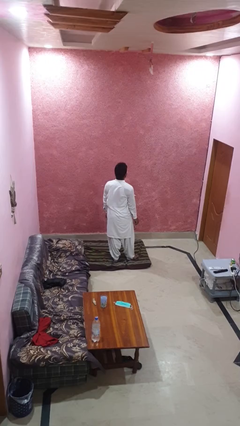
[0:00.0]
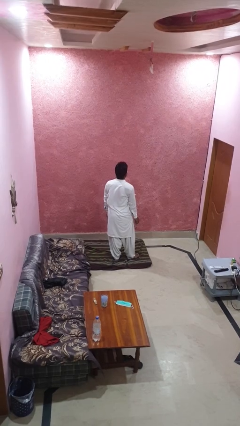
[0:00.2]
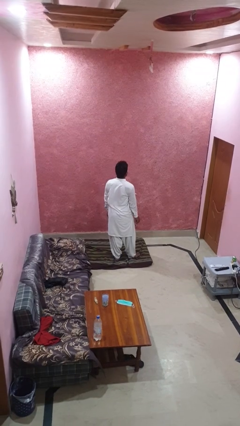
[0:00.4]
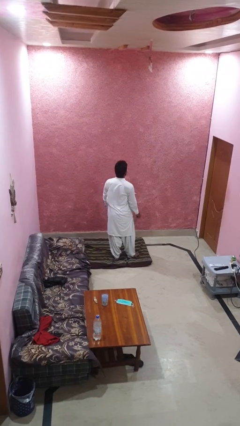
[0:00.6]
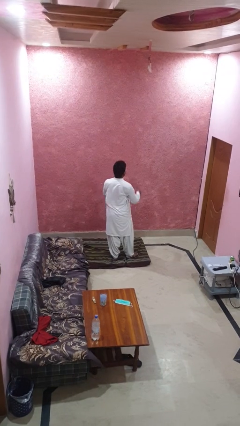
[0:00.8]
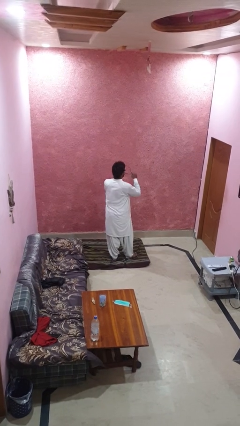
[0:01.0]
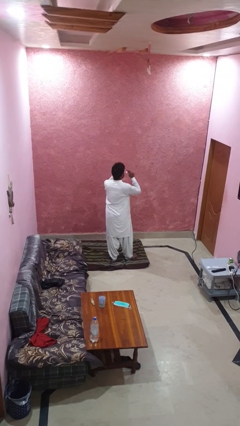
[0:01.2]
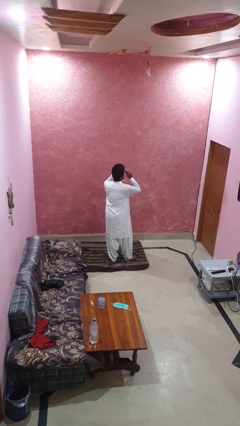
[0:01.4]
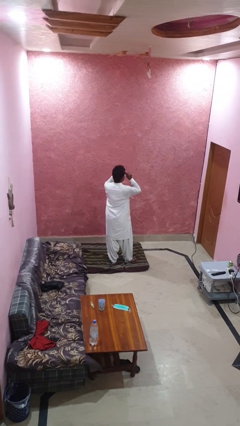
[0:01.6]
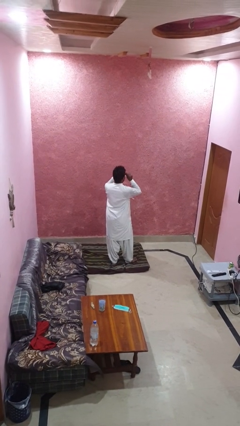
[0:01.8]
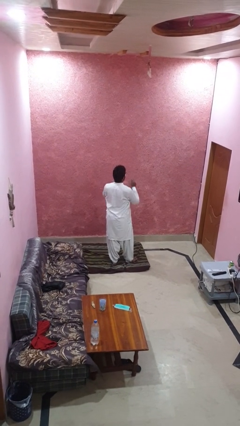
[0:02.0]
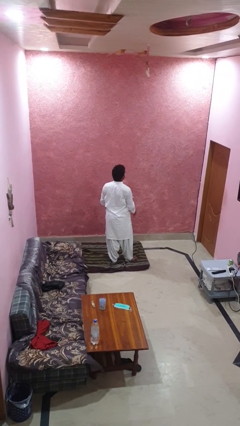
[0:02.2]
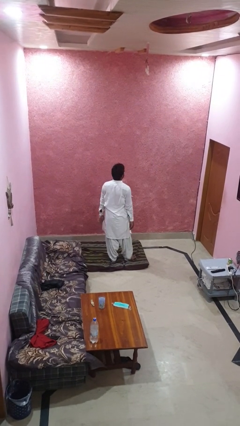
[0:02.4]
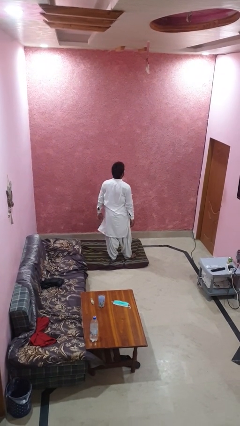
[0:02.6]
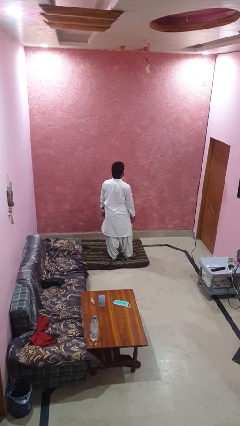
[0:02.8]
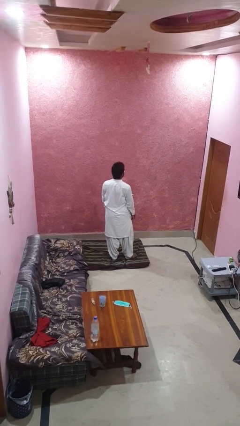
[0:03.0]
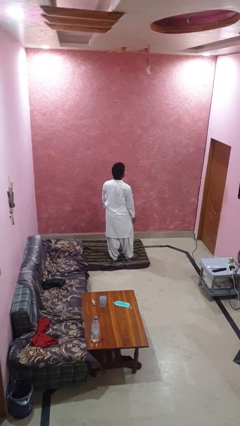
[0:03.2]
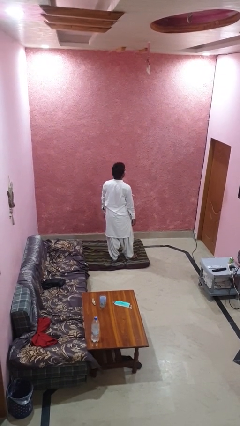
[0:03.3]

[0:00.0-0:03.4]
person puts on glasses

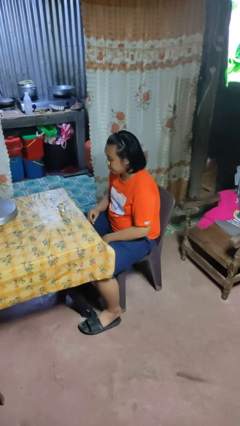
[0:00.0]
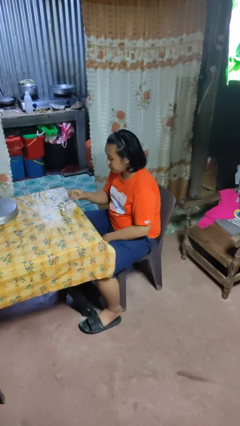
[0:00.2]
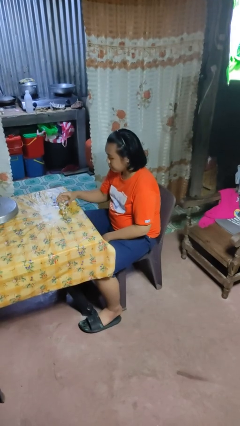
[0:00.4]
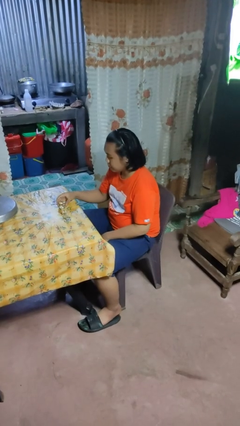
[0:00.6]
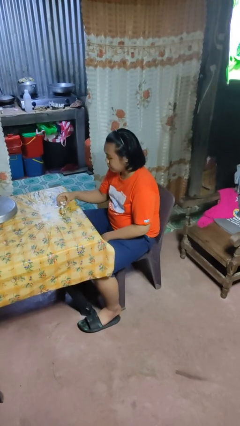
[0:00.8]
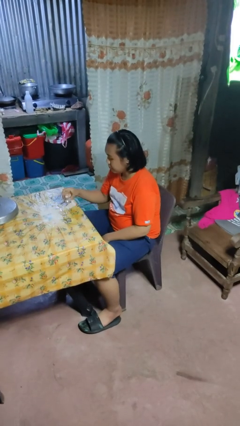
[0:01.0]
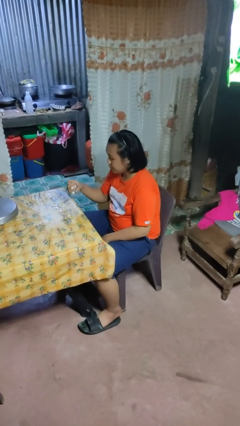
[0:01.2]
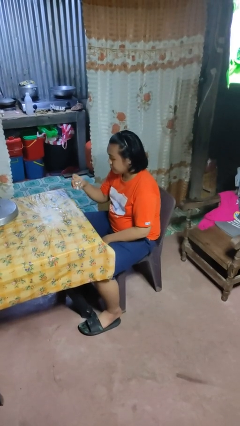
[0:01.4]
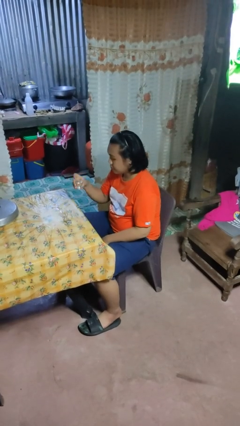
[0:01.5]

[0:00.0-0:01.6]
person picks up object from table

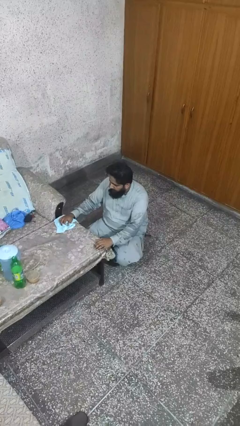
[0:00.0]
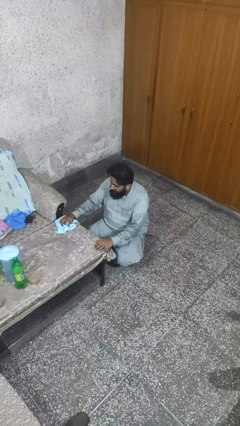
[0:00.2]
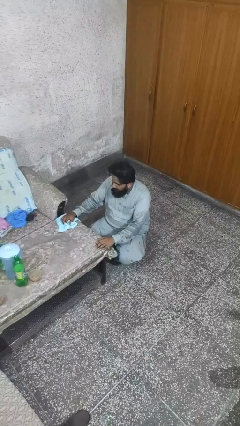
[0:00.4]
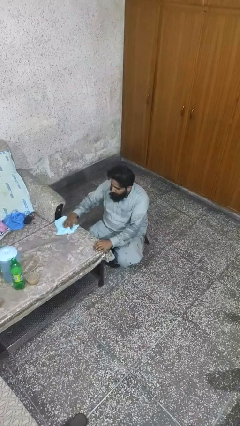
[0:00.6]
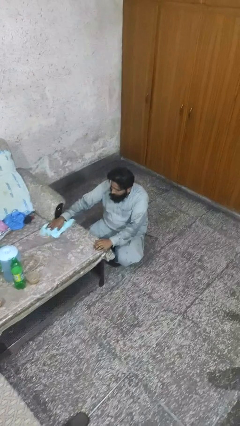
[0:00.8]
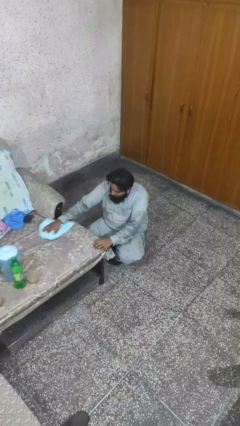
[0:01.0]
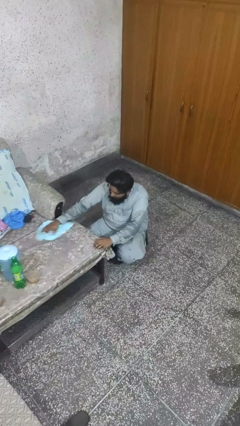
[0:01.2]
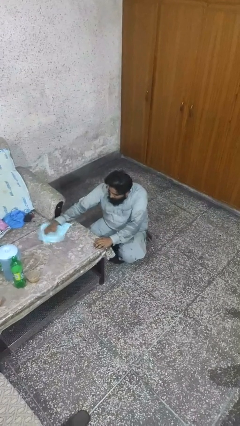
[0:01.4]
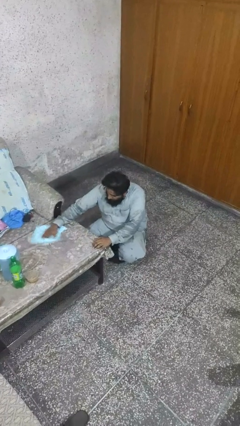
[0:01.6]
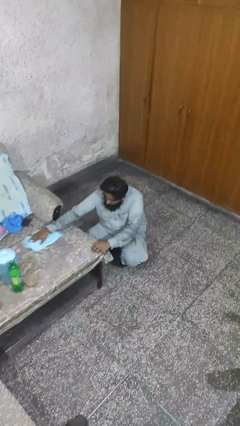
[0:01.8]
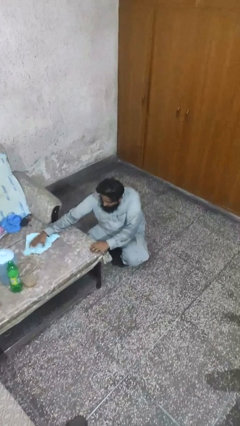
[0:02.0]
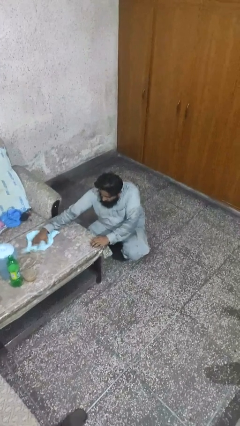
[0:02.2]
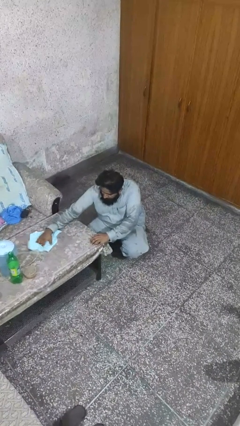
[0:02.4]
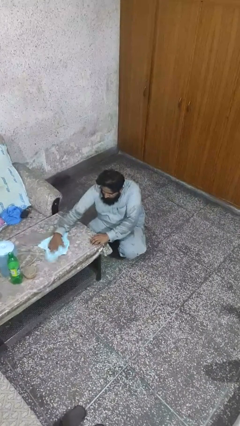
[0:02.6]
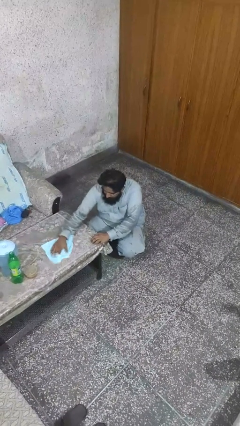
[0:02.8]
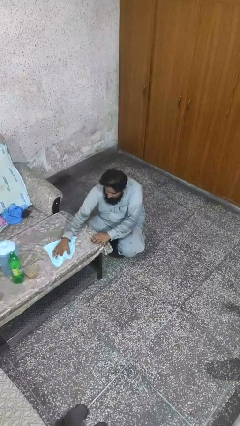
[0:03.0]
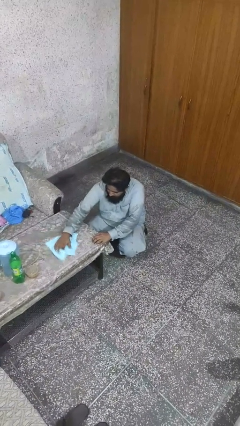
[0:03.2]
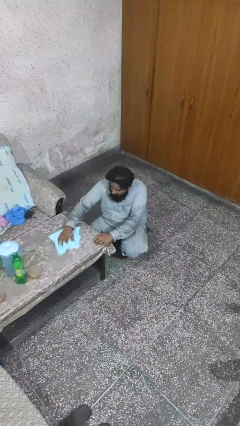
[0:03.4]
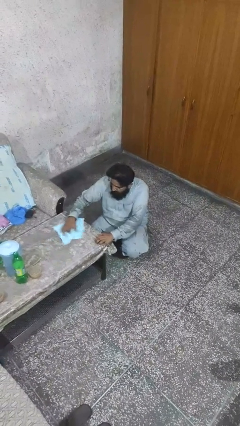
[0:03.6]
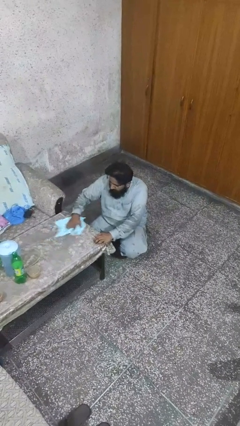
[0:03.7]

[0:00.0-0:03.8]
person cleans table with rag

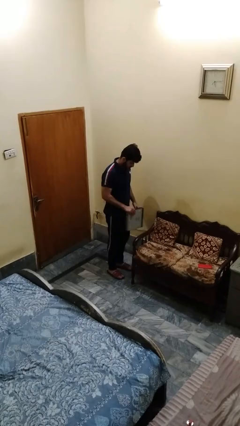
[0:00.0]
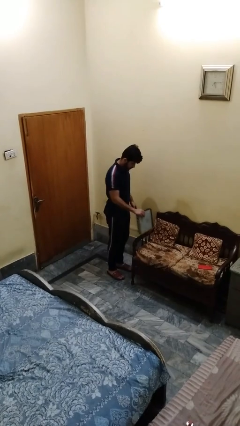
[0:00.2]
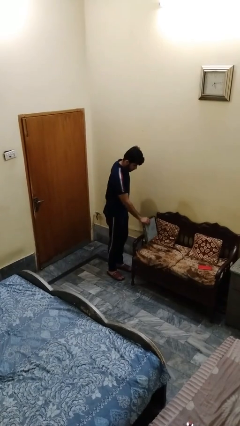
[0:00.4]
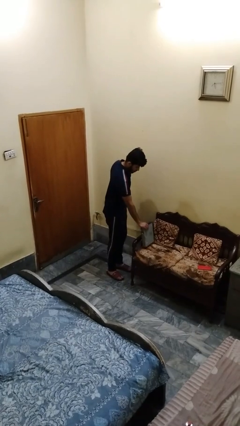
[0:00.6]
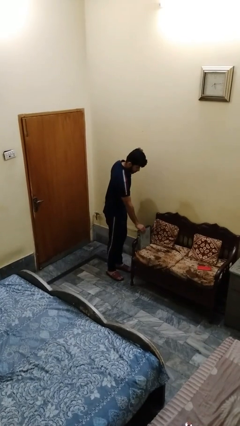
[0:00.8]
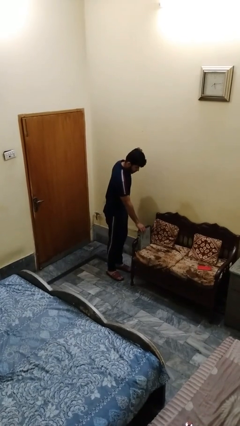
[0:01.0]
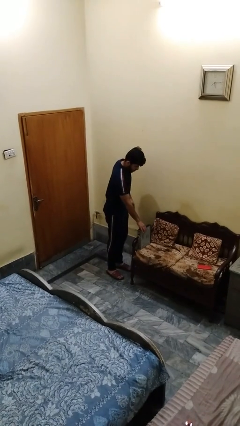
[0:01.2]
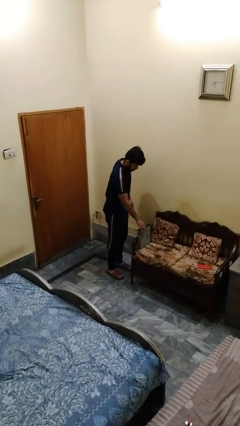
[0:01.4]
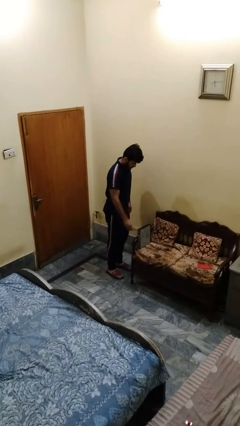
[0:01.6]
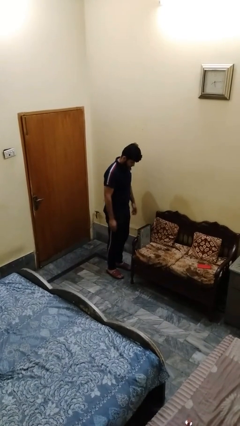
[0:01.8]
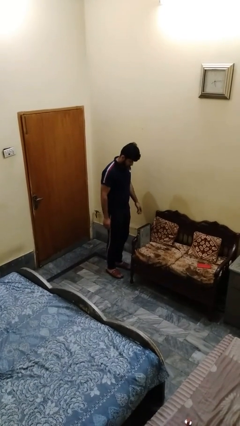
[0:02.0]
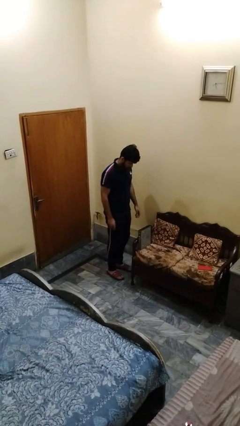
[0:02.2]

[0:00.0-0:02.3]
person puts down object on couch

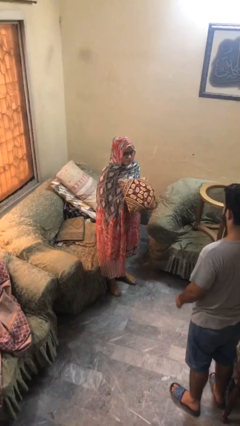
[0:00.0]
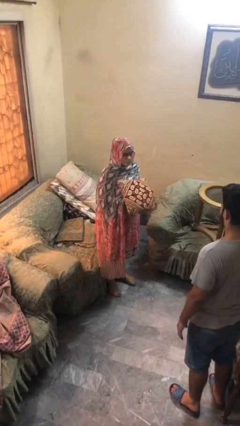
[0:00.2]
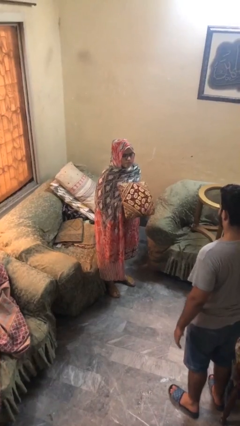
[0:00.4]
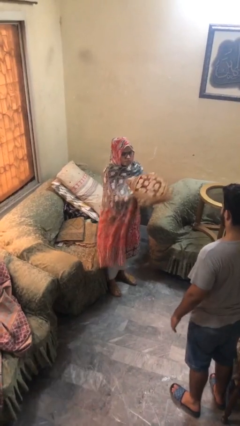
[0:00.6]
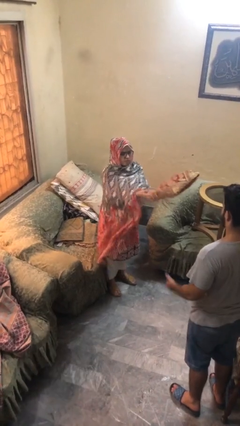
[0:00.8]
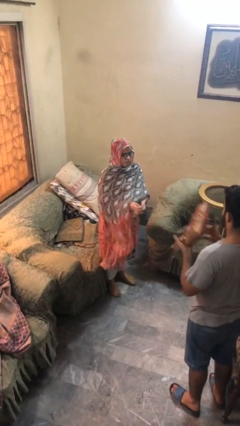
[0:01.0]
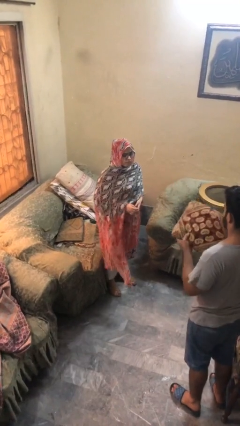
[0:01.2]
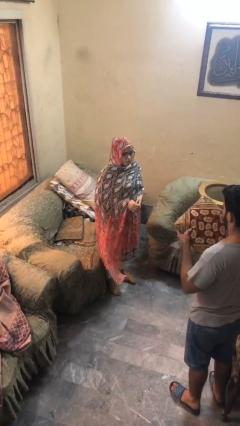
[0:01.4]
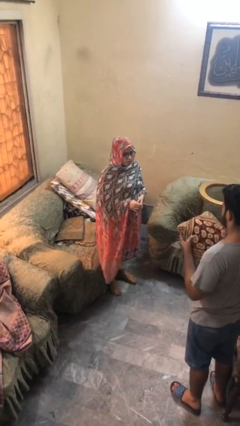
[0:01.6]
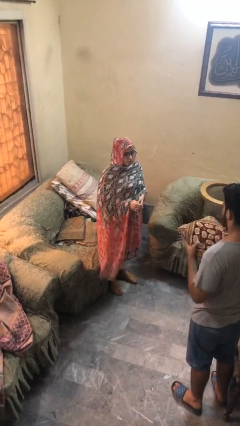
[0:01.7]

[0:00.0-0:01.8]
person throws object to person

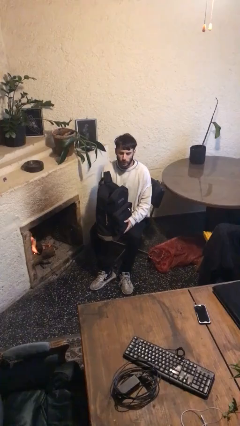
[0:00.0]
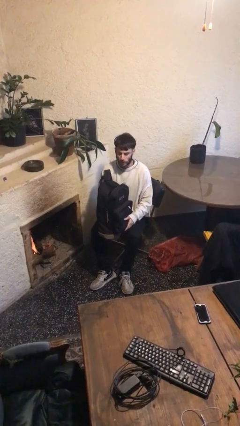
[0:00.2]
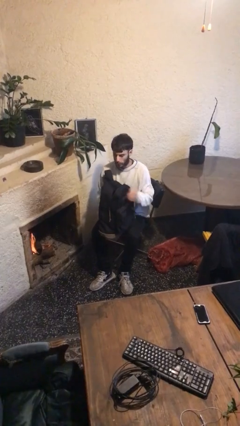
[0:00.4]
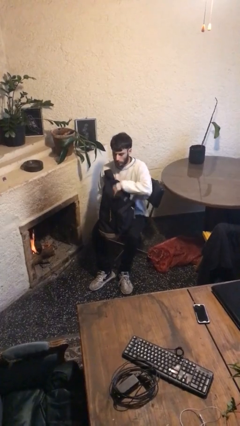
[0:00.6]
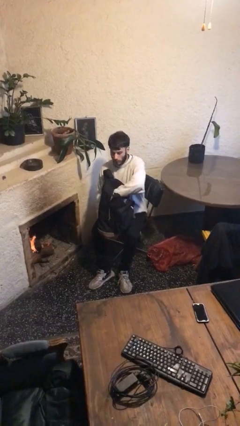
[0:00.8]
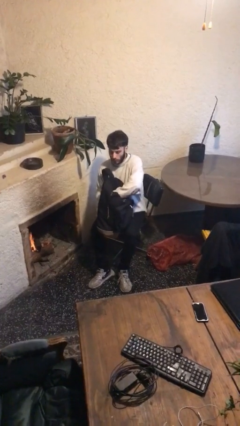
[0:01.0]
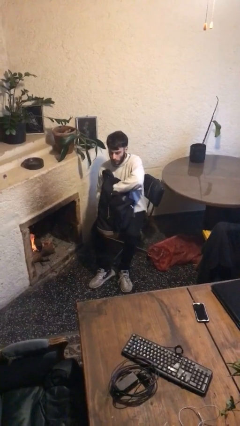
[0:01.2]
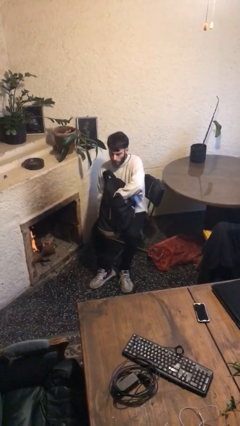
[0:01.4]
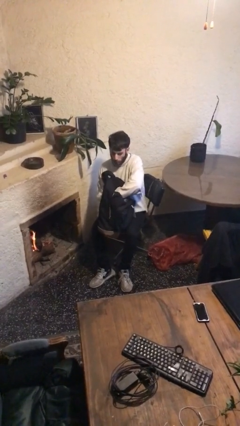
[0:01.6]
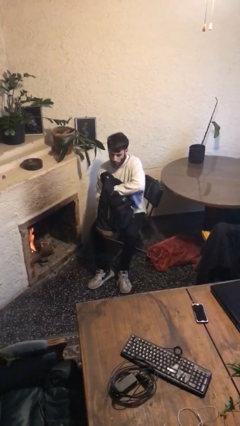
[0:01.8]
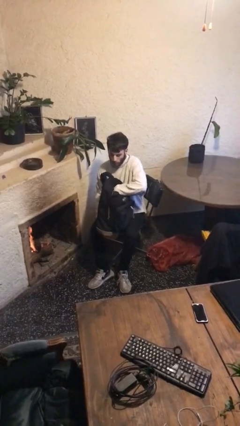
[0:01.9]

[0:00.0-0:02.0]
person searches in backpack

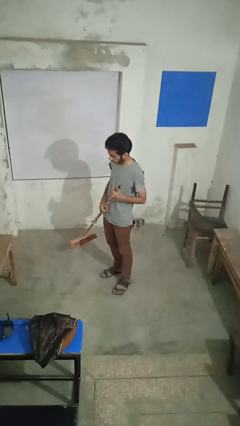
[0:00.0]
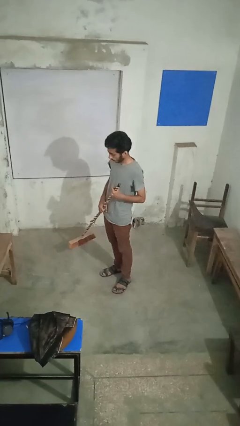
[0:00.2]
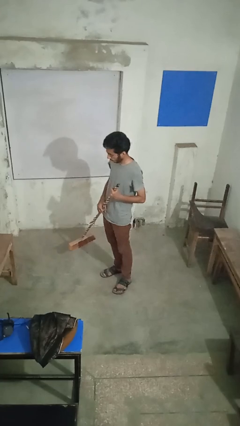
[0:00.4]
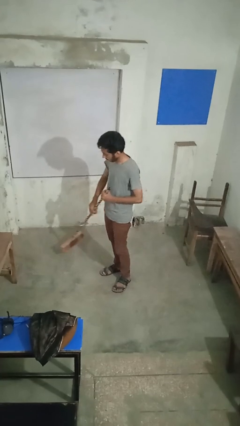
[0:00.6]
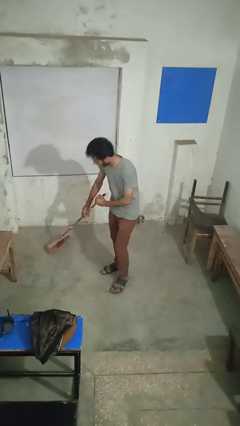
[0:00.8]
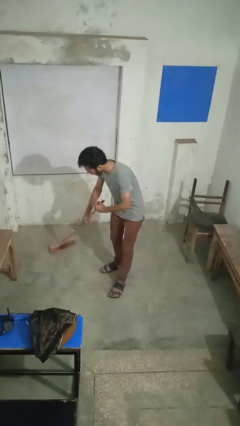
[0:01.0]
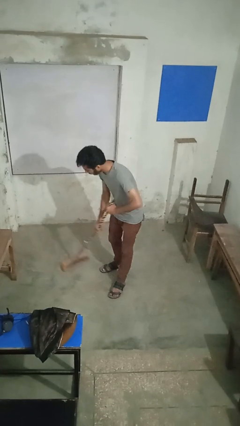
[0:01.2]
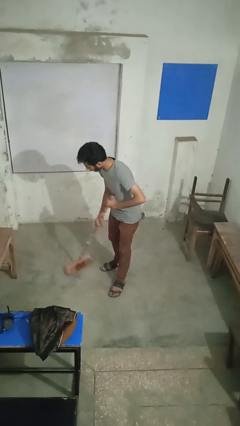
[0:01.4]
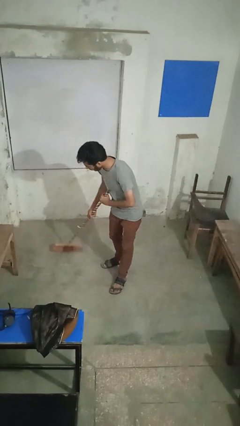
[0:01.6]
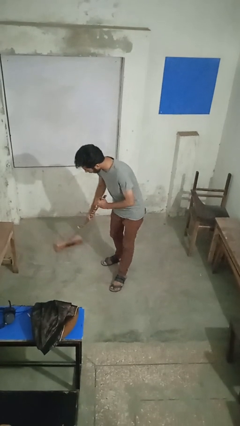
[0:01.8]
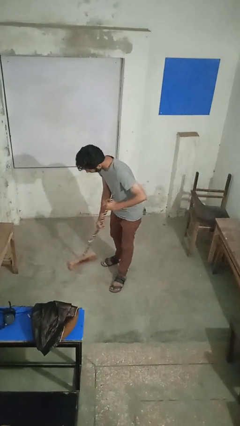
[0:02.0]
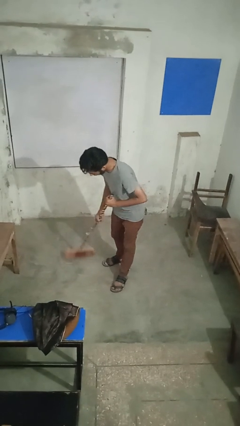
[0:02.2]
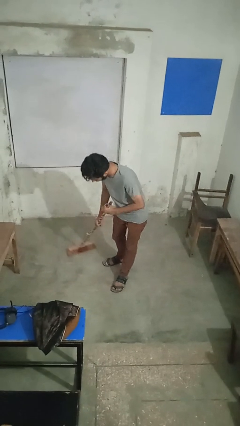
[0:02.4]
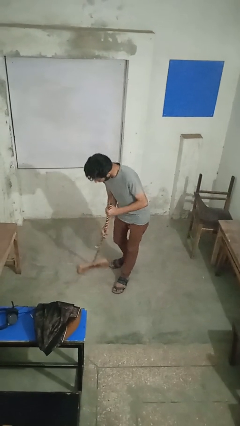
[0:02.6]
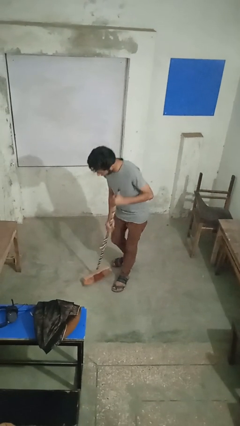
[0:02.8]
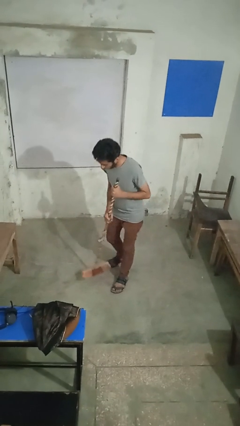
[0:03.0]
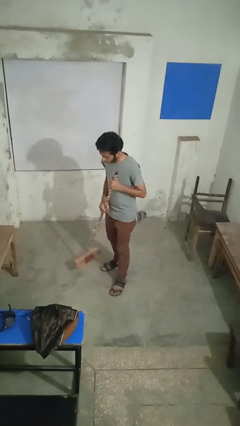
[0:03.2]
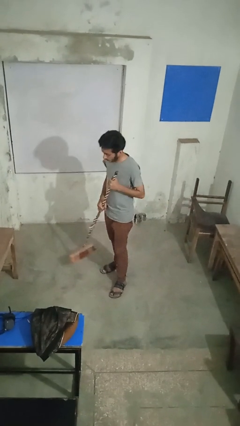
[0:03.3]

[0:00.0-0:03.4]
person sweeps floor
